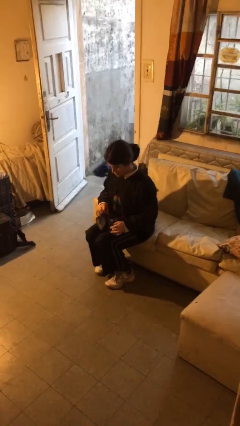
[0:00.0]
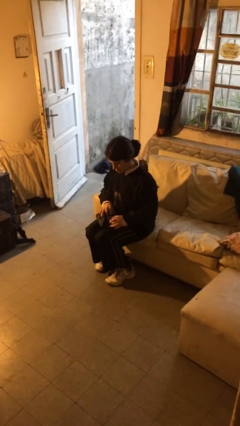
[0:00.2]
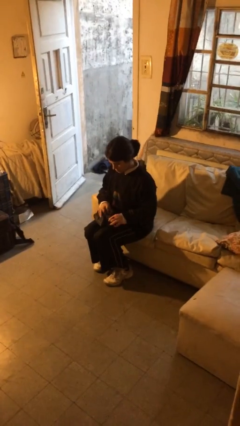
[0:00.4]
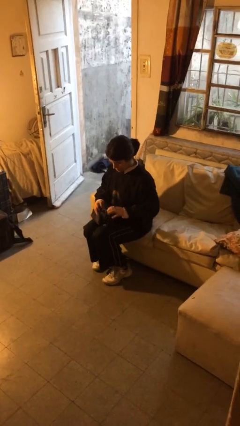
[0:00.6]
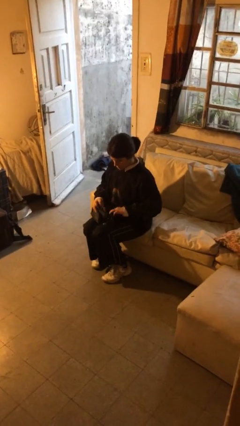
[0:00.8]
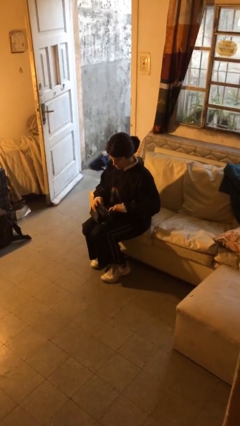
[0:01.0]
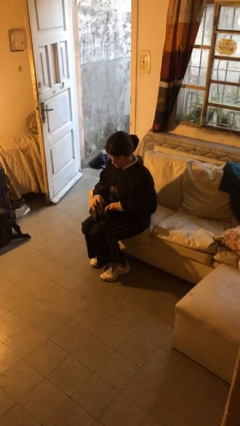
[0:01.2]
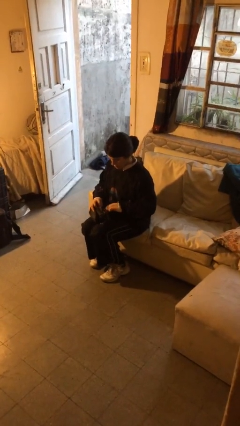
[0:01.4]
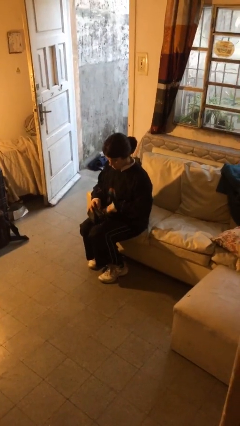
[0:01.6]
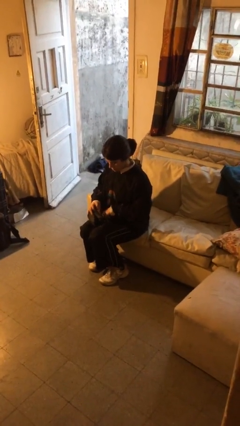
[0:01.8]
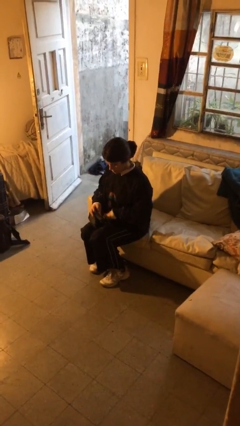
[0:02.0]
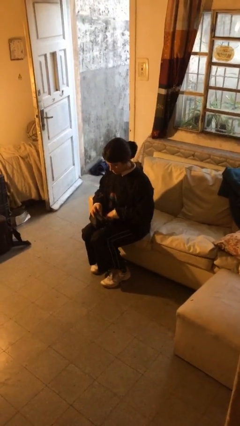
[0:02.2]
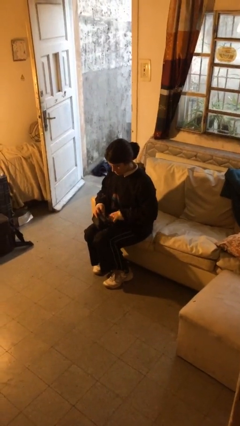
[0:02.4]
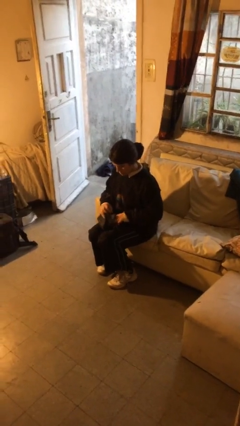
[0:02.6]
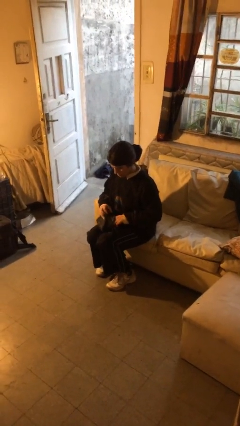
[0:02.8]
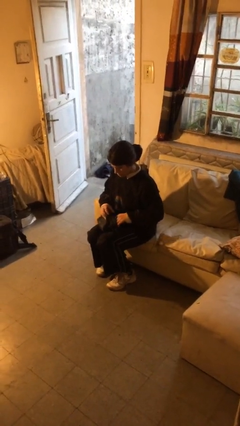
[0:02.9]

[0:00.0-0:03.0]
person searches in purse

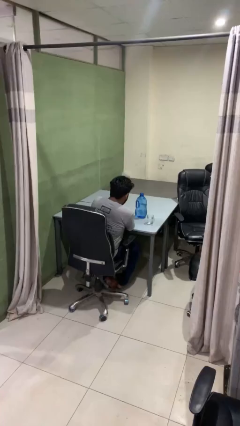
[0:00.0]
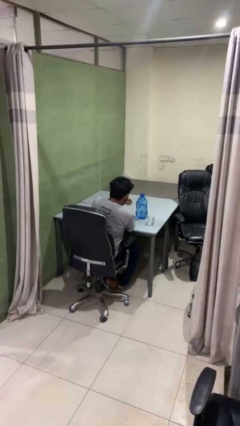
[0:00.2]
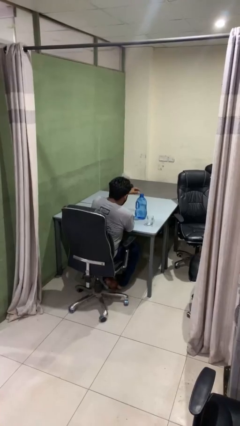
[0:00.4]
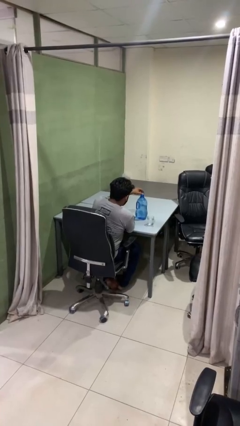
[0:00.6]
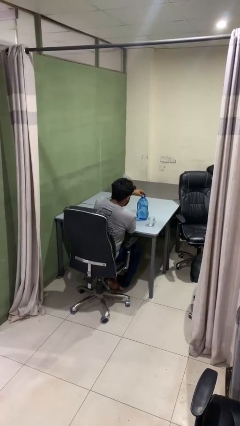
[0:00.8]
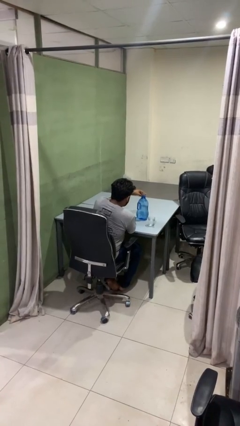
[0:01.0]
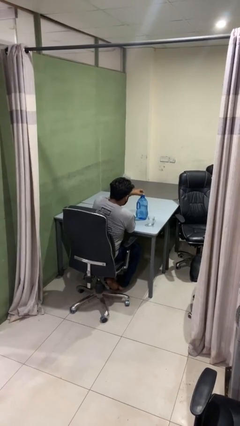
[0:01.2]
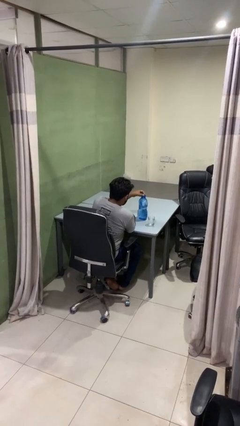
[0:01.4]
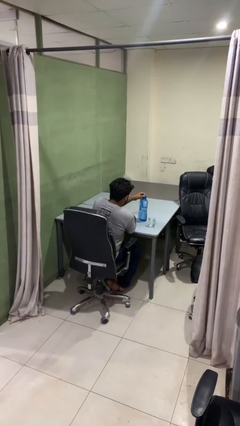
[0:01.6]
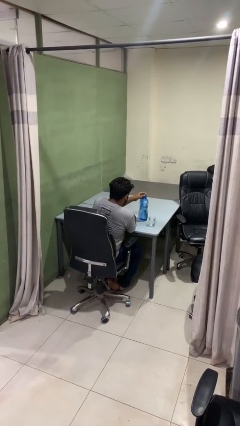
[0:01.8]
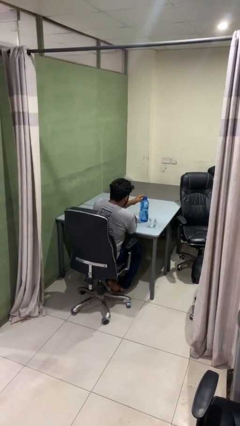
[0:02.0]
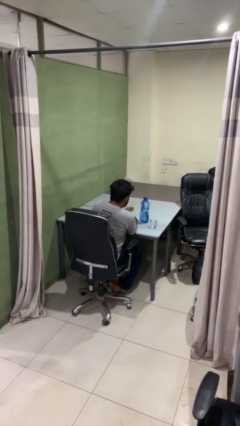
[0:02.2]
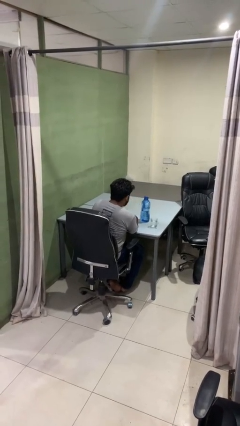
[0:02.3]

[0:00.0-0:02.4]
person screws lid to bottle

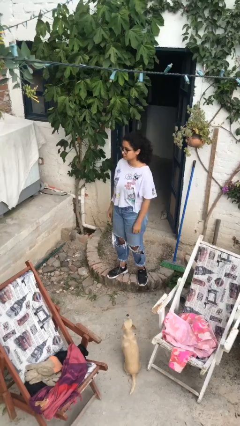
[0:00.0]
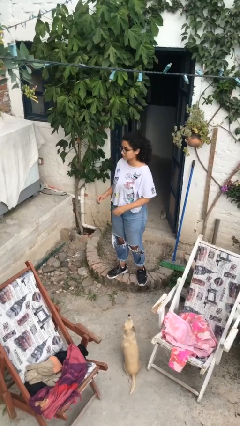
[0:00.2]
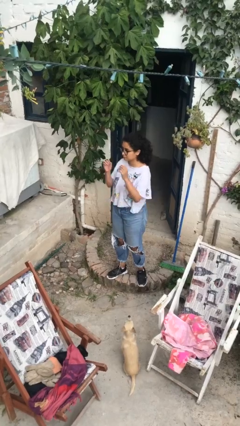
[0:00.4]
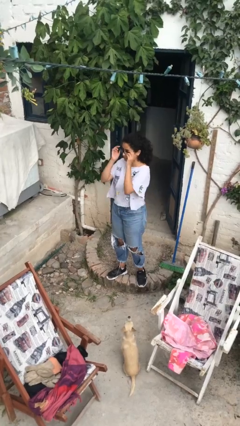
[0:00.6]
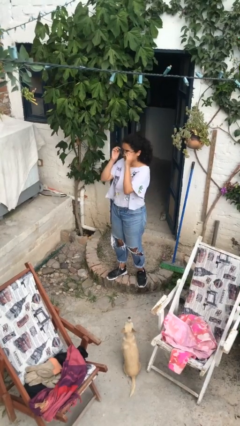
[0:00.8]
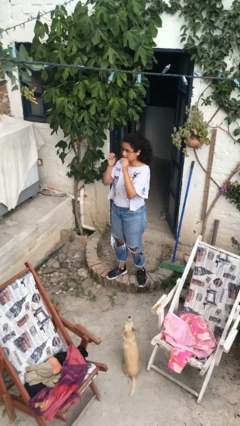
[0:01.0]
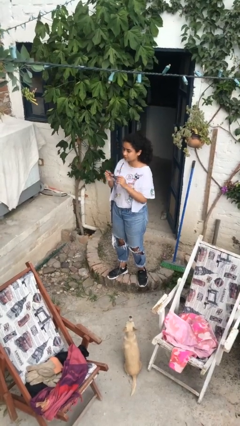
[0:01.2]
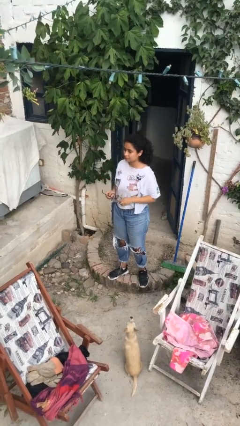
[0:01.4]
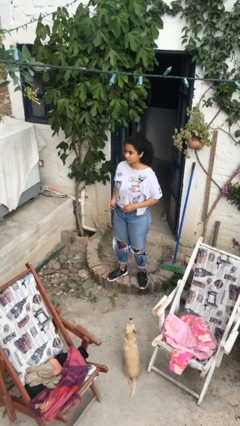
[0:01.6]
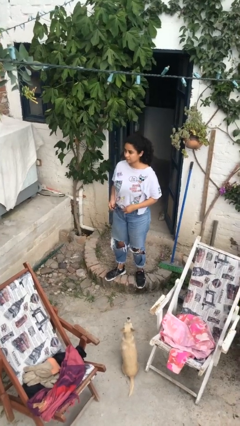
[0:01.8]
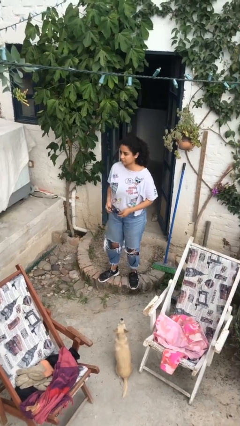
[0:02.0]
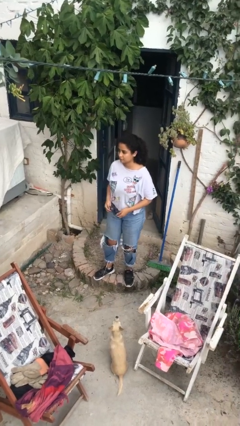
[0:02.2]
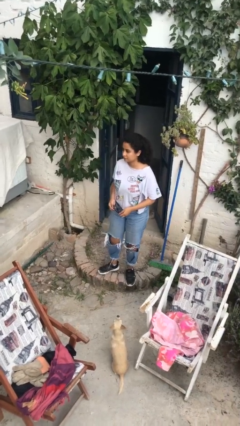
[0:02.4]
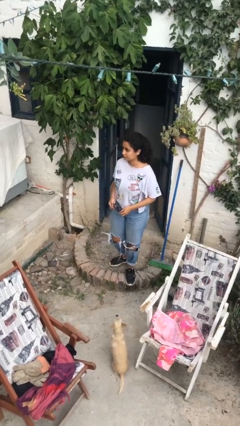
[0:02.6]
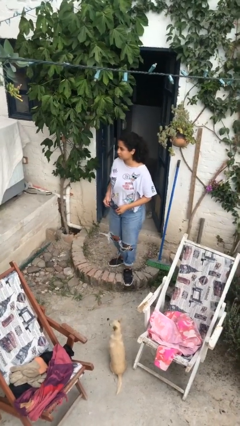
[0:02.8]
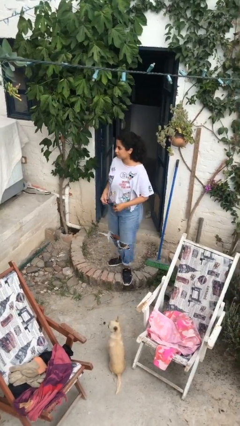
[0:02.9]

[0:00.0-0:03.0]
person takes off glasses

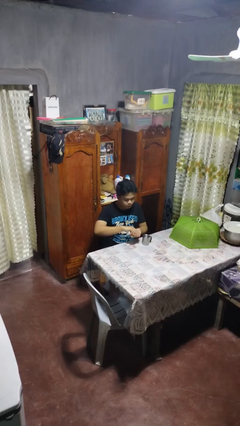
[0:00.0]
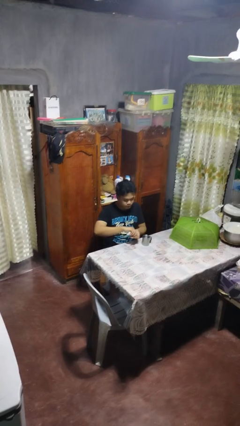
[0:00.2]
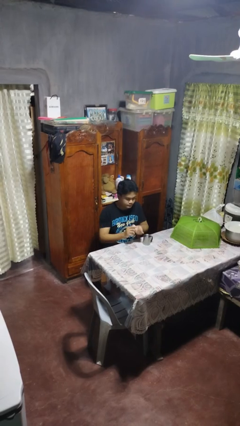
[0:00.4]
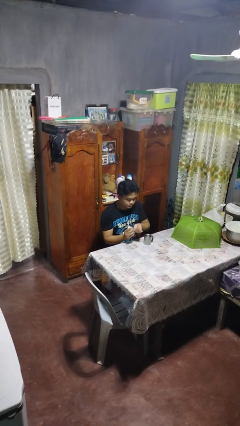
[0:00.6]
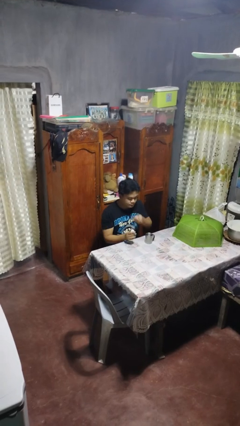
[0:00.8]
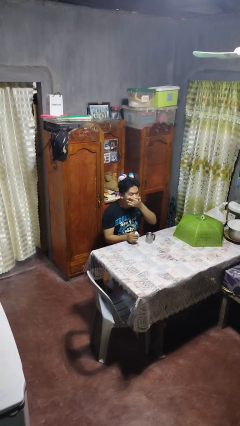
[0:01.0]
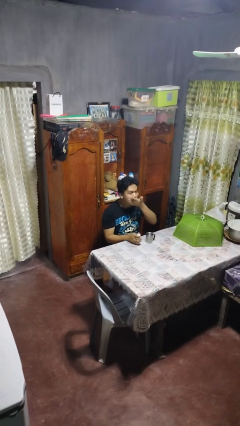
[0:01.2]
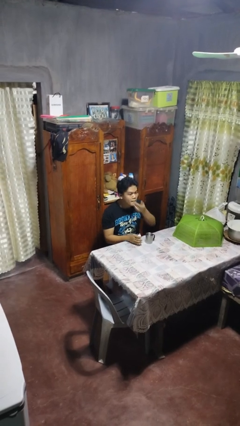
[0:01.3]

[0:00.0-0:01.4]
person takes medicine pills

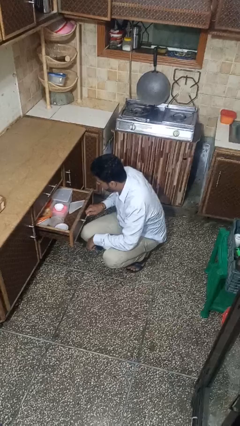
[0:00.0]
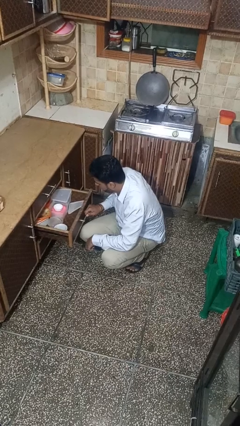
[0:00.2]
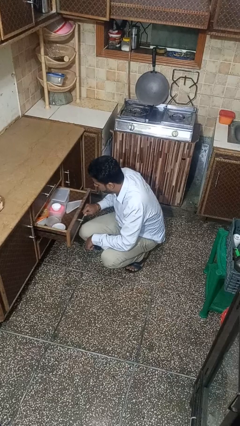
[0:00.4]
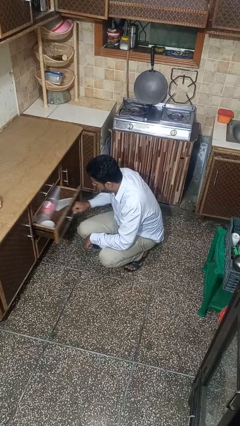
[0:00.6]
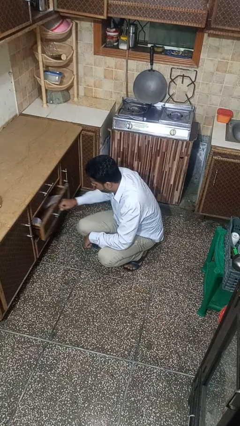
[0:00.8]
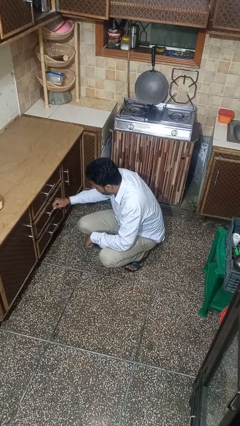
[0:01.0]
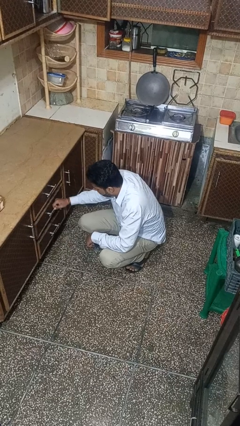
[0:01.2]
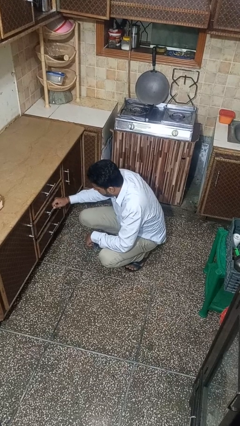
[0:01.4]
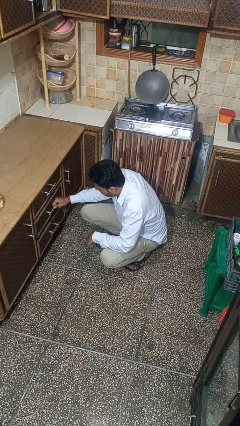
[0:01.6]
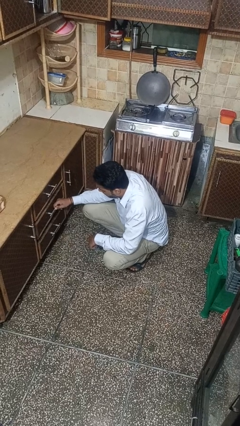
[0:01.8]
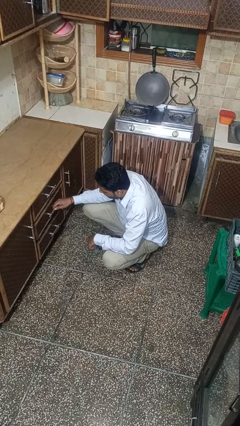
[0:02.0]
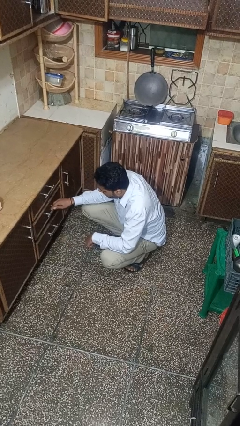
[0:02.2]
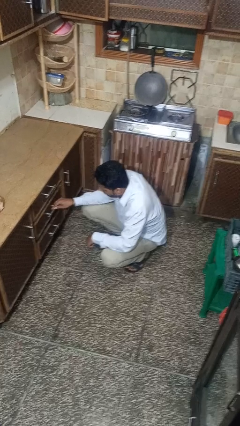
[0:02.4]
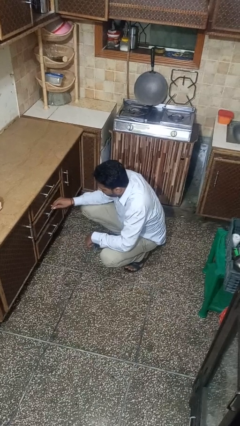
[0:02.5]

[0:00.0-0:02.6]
person closes kitchen drawer

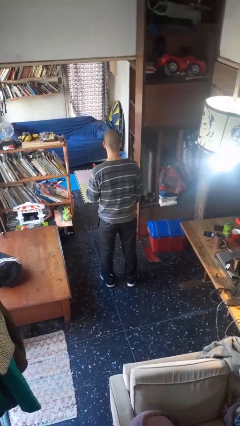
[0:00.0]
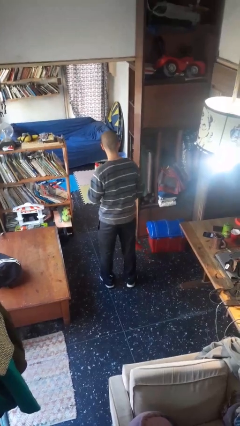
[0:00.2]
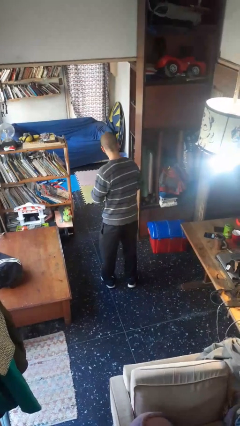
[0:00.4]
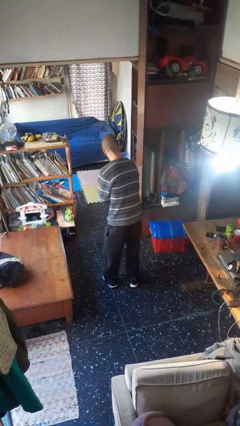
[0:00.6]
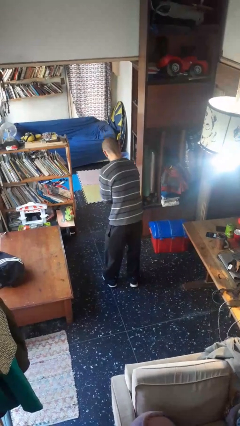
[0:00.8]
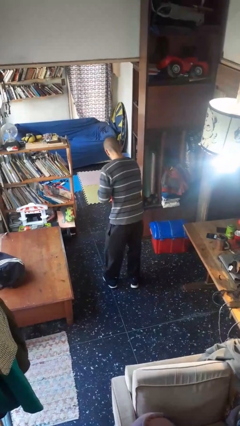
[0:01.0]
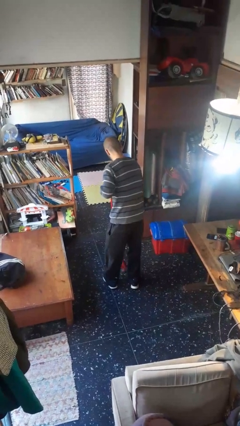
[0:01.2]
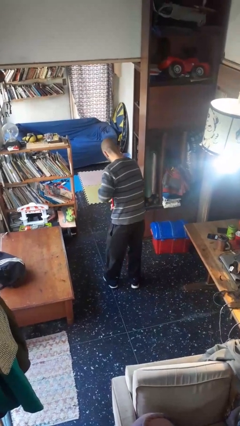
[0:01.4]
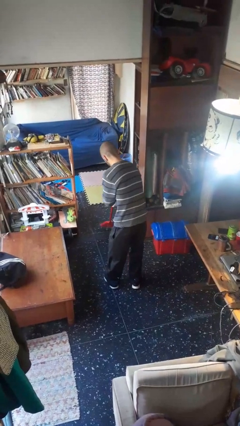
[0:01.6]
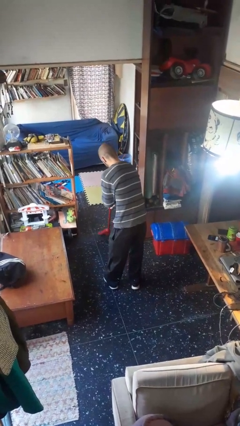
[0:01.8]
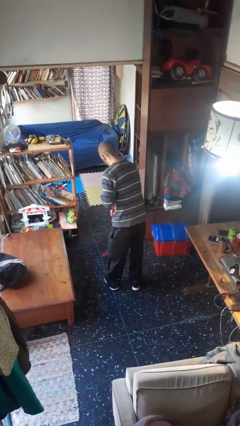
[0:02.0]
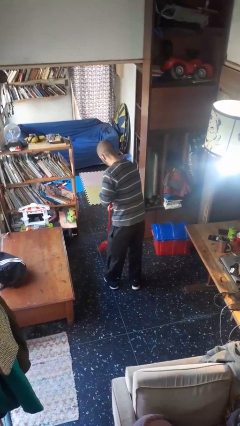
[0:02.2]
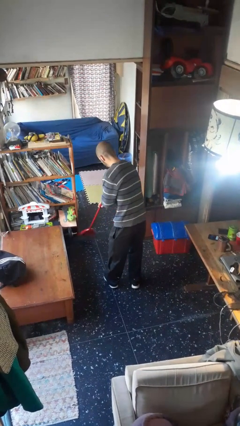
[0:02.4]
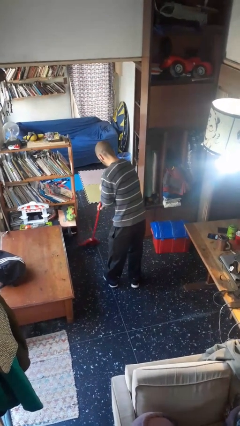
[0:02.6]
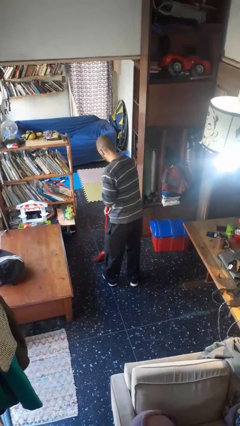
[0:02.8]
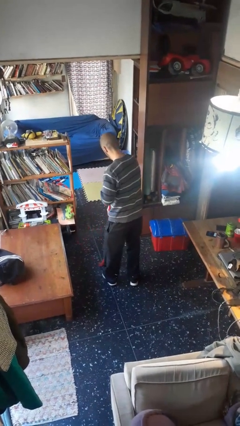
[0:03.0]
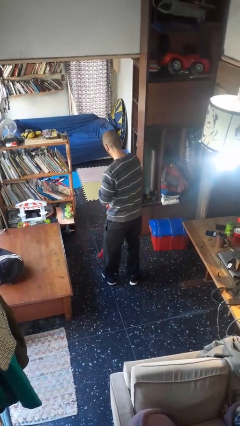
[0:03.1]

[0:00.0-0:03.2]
person sweeps floor

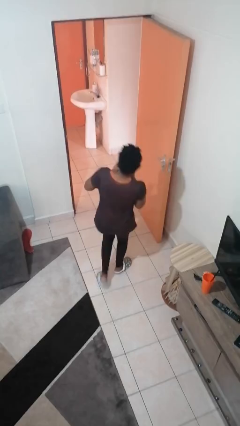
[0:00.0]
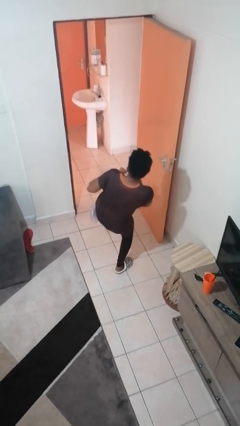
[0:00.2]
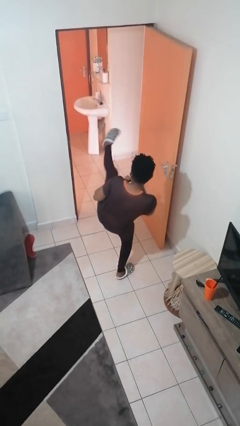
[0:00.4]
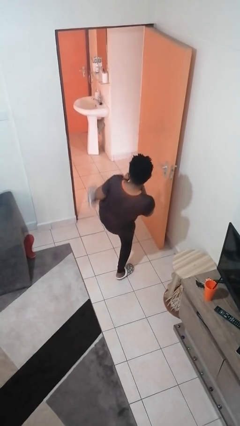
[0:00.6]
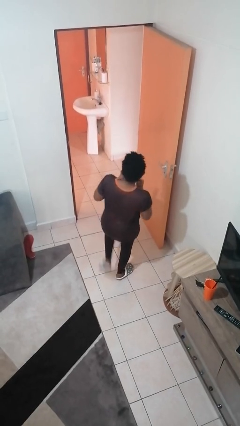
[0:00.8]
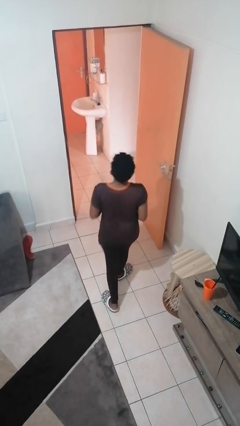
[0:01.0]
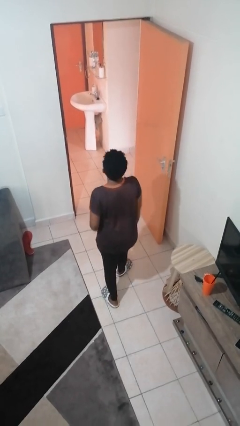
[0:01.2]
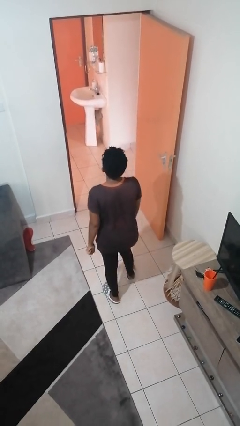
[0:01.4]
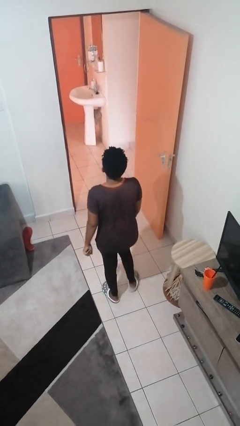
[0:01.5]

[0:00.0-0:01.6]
person karate kicks
